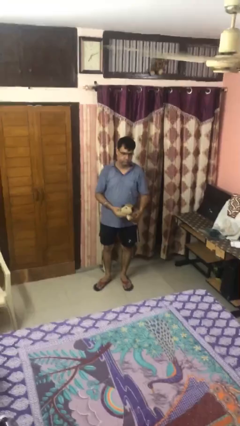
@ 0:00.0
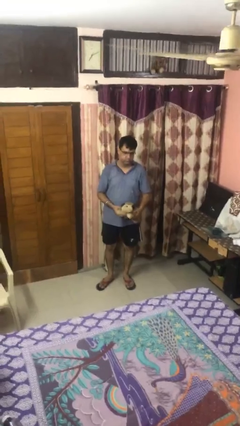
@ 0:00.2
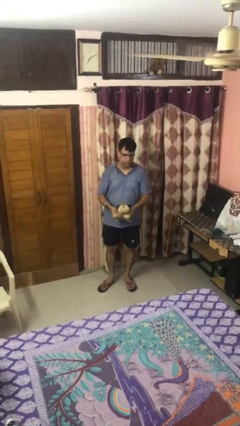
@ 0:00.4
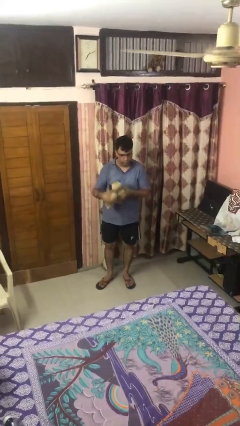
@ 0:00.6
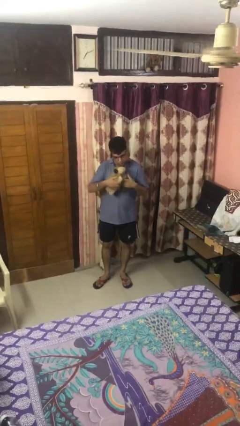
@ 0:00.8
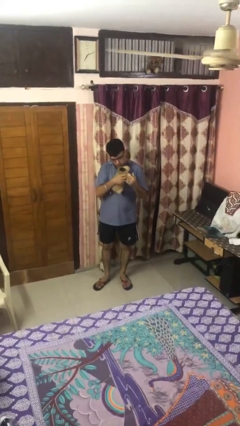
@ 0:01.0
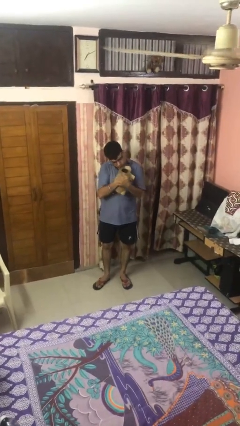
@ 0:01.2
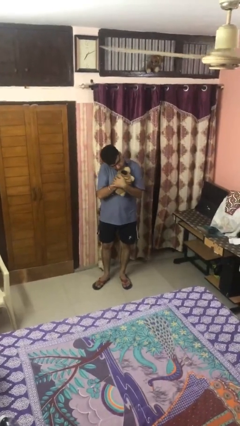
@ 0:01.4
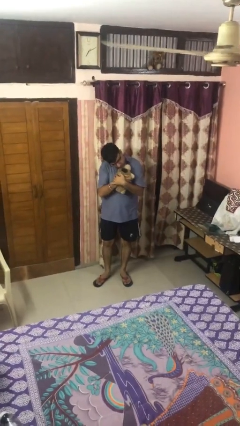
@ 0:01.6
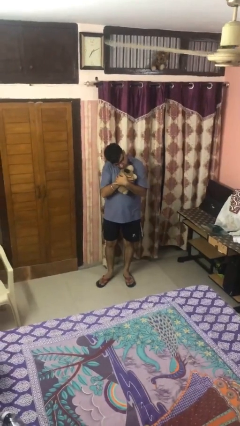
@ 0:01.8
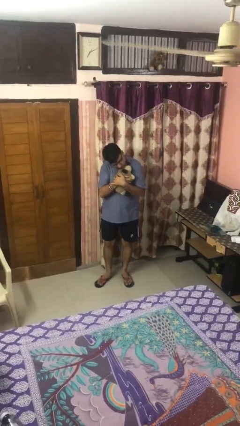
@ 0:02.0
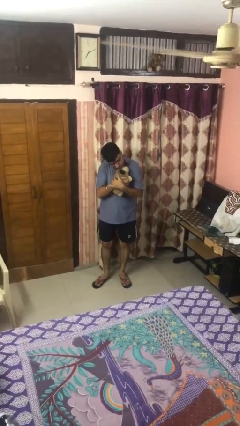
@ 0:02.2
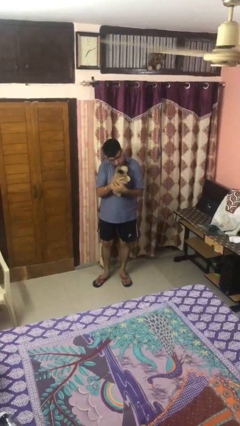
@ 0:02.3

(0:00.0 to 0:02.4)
person hugs stuffed animal

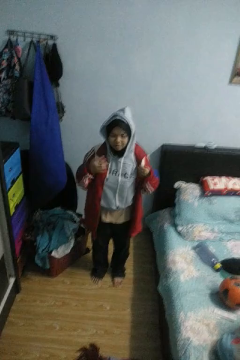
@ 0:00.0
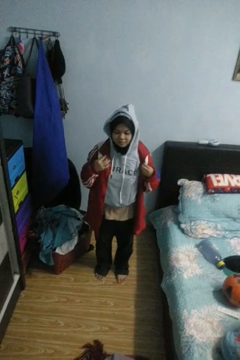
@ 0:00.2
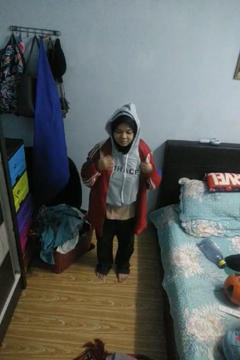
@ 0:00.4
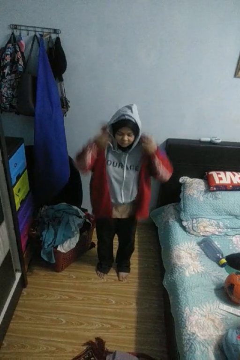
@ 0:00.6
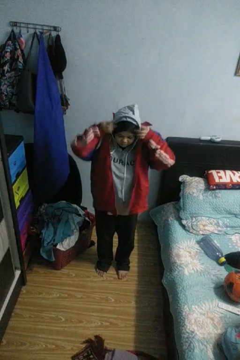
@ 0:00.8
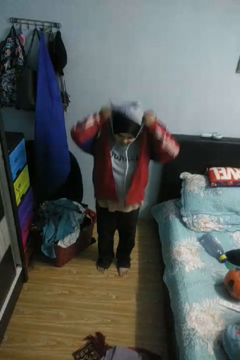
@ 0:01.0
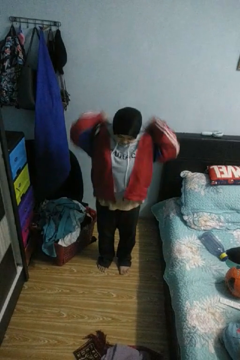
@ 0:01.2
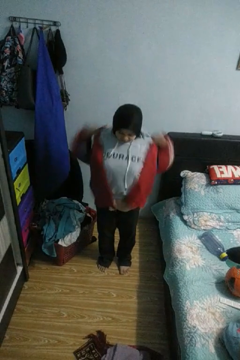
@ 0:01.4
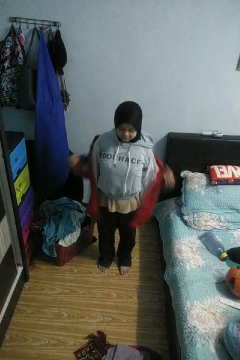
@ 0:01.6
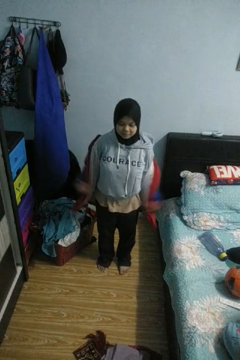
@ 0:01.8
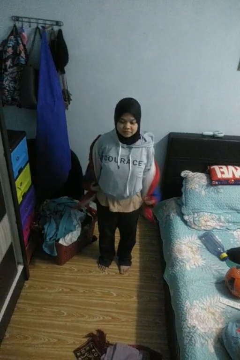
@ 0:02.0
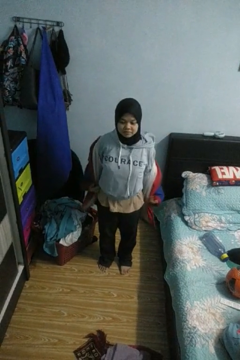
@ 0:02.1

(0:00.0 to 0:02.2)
person takes off hoodie

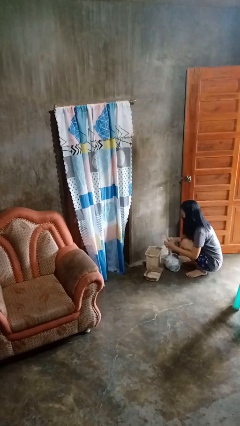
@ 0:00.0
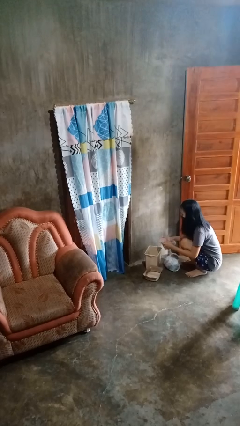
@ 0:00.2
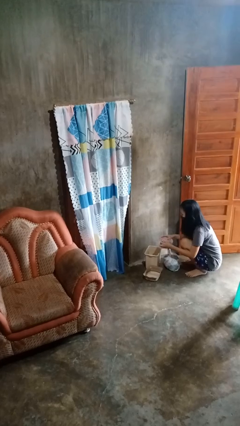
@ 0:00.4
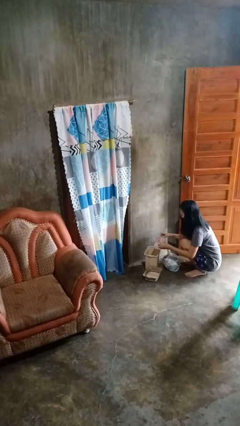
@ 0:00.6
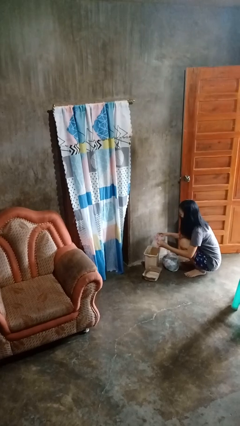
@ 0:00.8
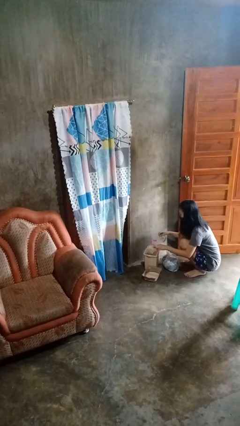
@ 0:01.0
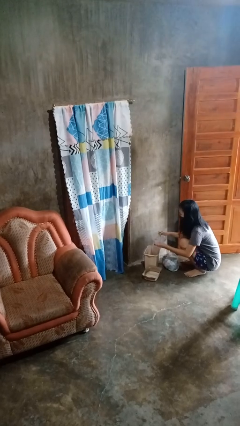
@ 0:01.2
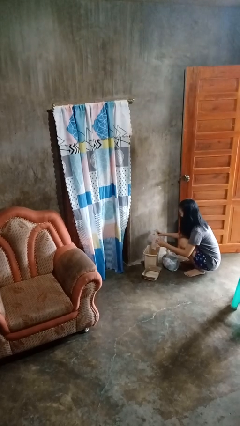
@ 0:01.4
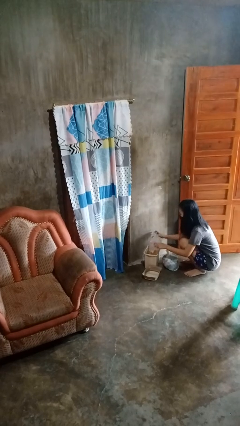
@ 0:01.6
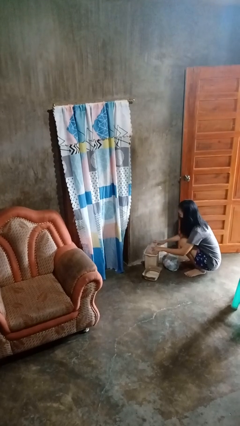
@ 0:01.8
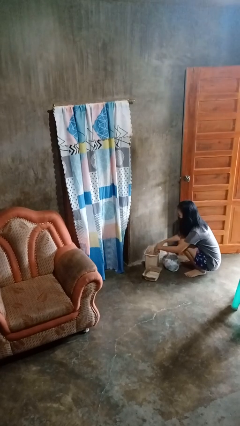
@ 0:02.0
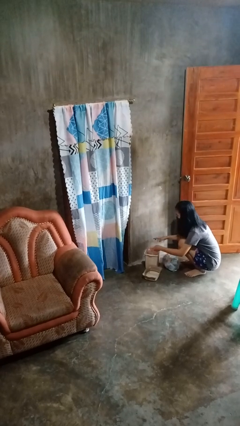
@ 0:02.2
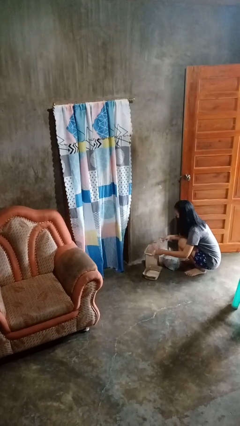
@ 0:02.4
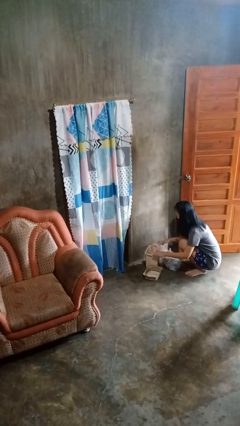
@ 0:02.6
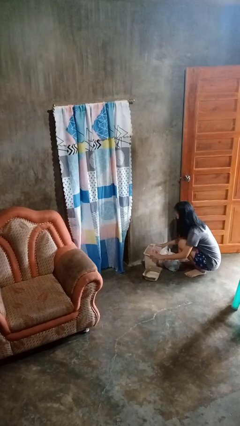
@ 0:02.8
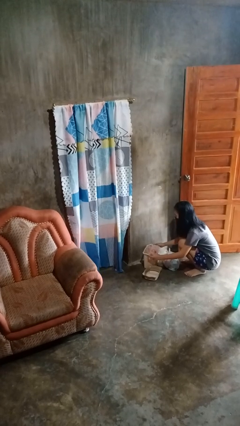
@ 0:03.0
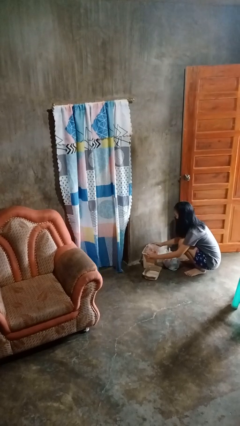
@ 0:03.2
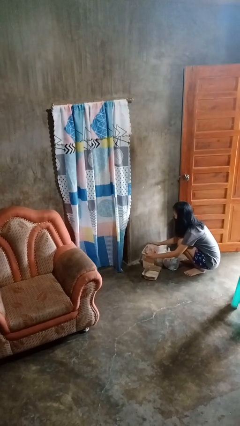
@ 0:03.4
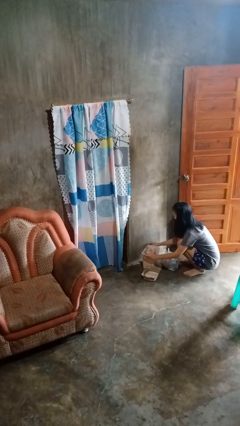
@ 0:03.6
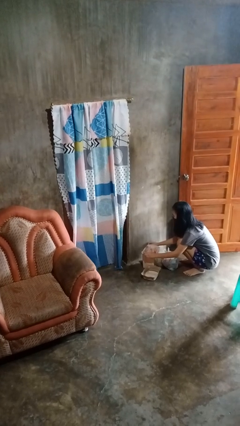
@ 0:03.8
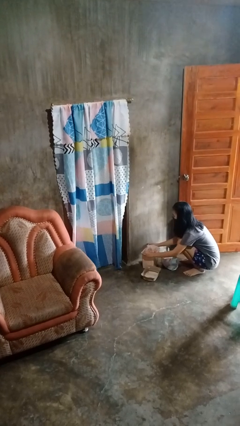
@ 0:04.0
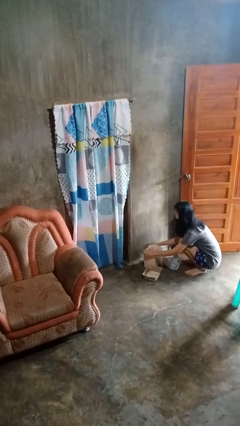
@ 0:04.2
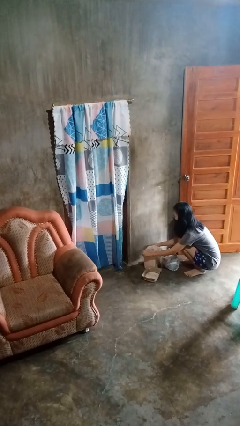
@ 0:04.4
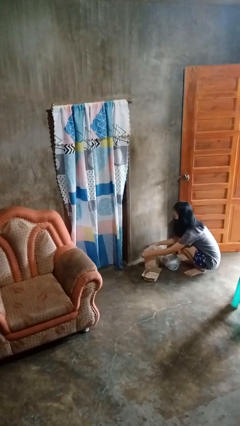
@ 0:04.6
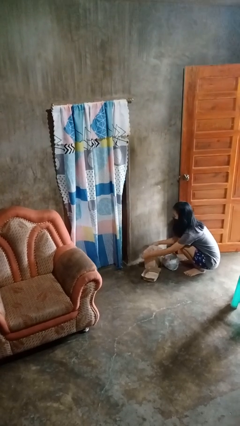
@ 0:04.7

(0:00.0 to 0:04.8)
person inserts trashbag into trashcan

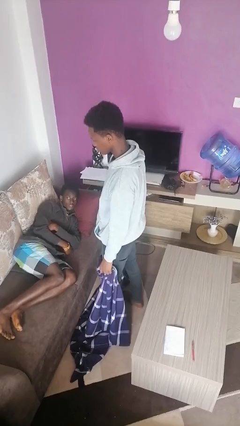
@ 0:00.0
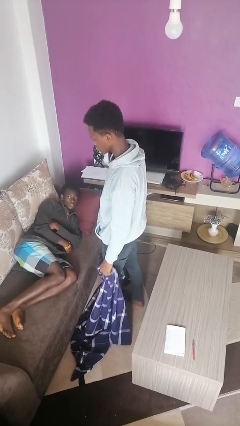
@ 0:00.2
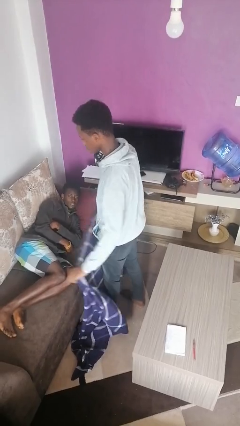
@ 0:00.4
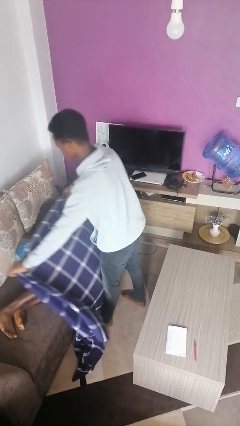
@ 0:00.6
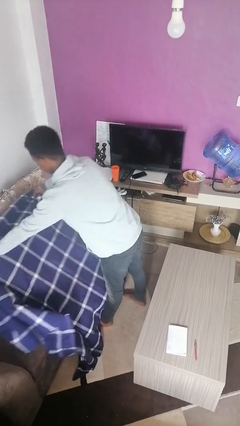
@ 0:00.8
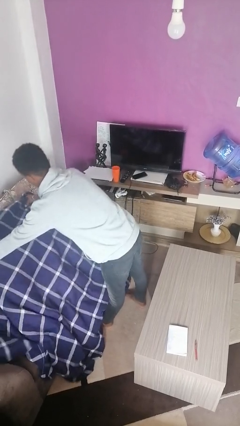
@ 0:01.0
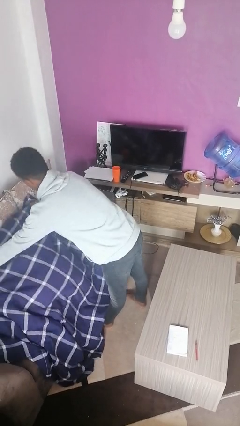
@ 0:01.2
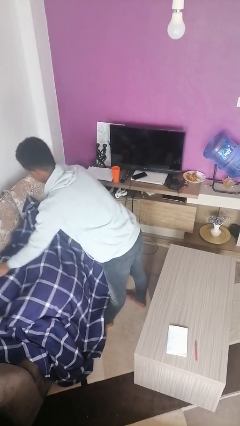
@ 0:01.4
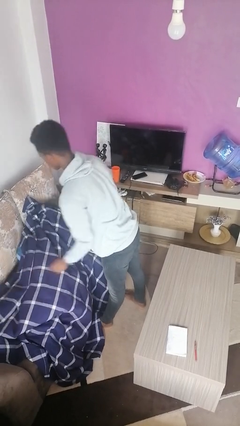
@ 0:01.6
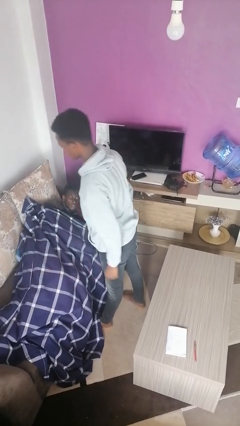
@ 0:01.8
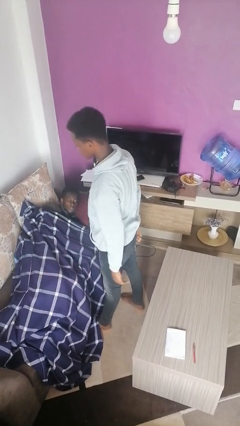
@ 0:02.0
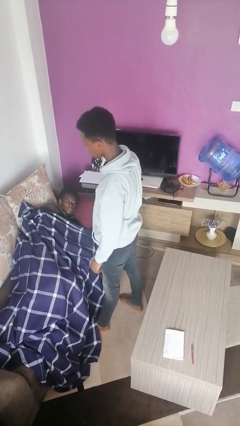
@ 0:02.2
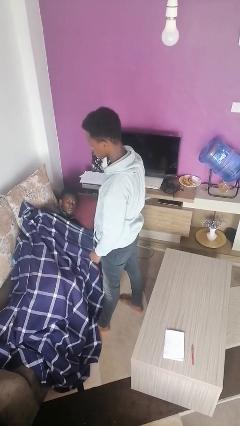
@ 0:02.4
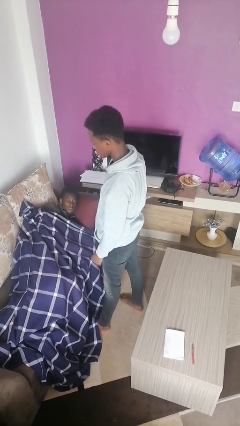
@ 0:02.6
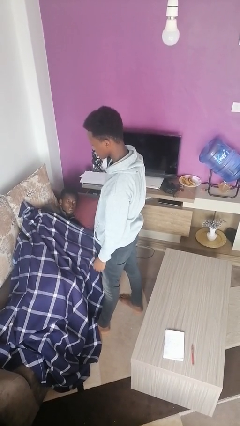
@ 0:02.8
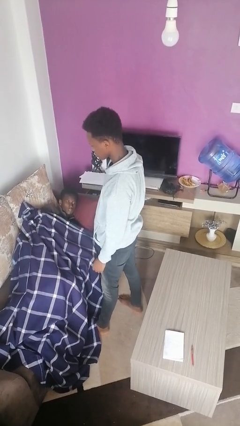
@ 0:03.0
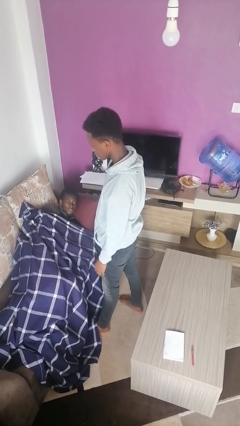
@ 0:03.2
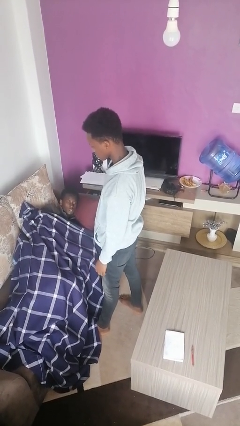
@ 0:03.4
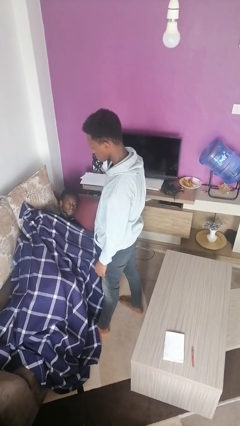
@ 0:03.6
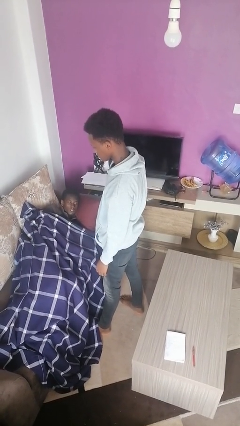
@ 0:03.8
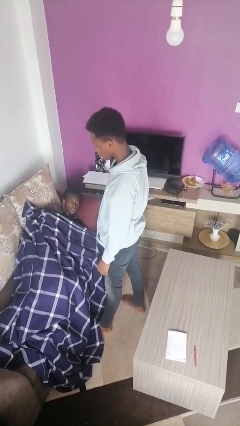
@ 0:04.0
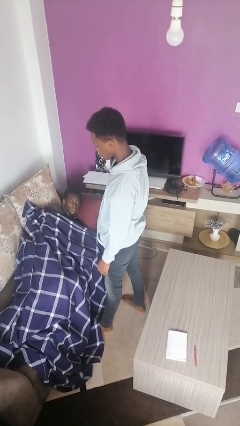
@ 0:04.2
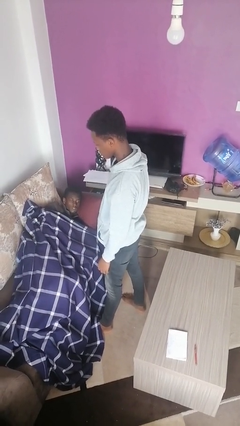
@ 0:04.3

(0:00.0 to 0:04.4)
person covers friend with blanket

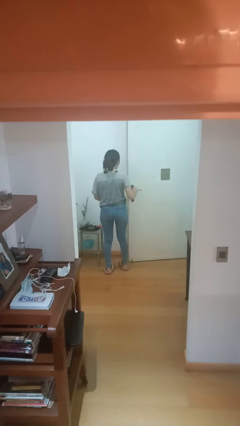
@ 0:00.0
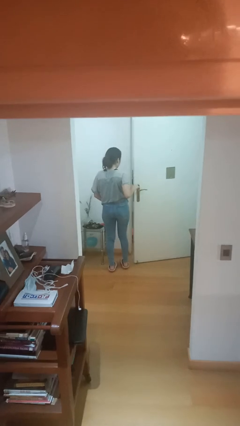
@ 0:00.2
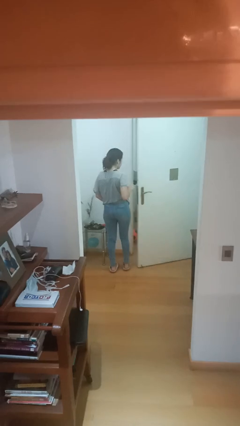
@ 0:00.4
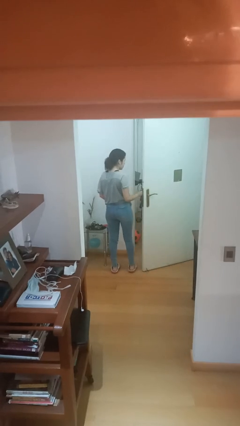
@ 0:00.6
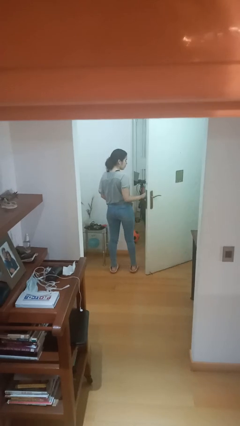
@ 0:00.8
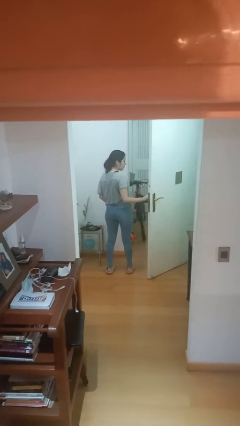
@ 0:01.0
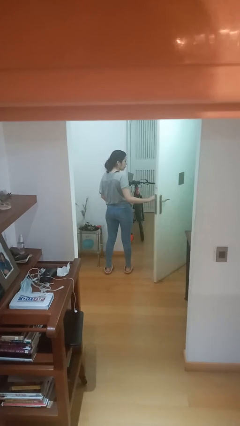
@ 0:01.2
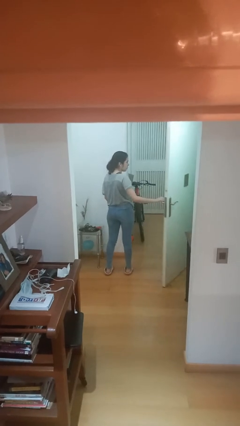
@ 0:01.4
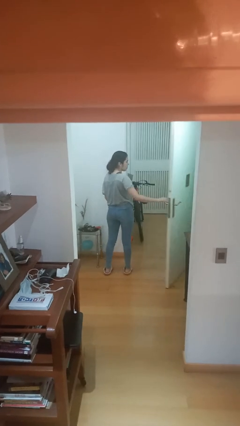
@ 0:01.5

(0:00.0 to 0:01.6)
person opens facility door

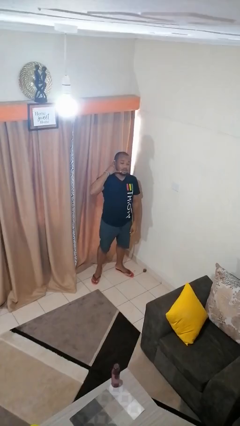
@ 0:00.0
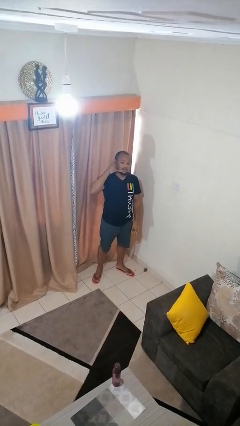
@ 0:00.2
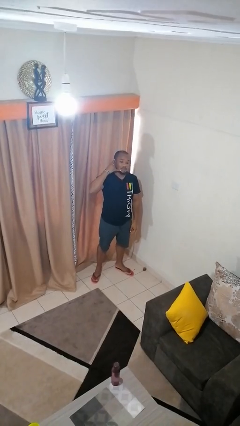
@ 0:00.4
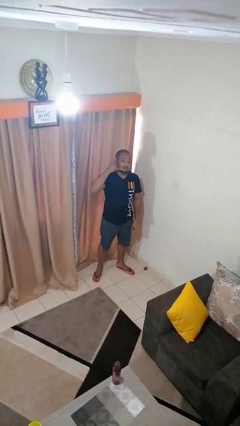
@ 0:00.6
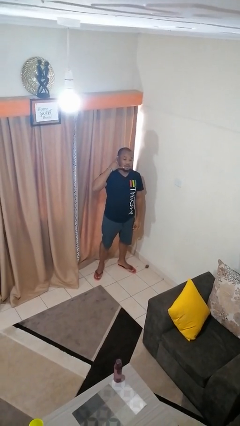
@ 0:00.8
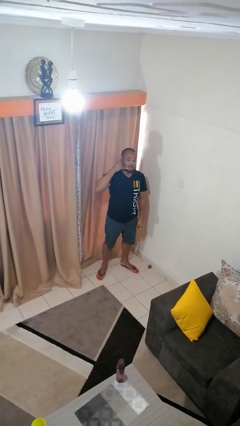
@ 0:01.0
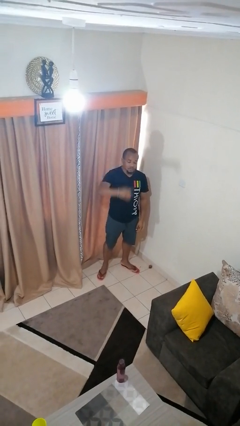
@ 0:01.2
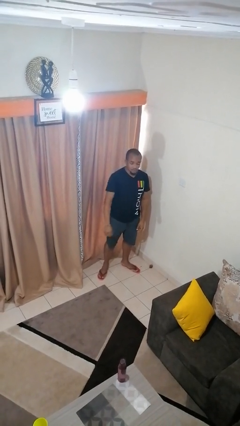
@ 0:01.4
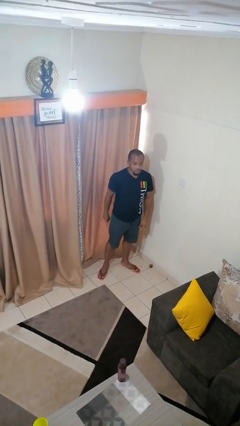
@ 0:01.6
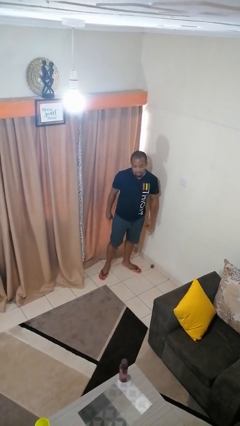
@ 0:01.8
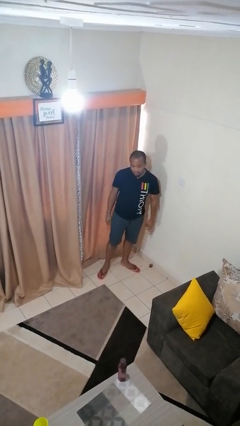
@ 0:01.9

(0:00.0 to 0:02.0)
person gestures call me

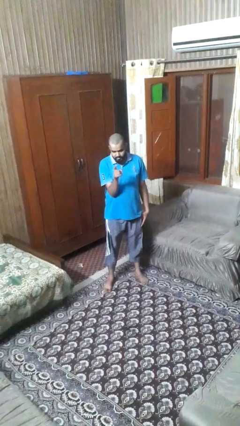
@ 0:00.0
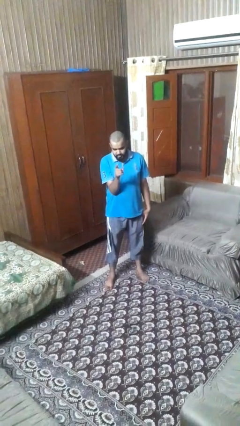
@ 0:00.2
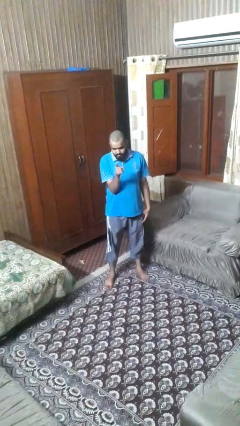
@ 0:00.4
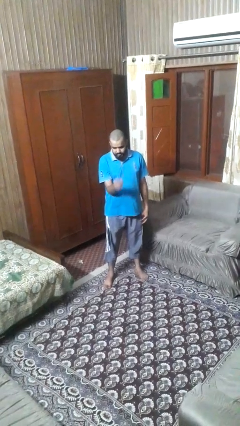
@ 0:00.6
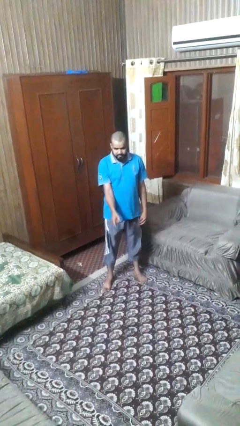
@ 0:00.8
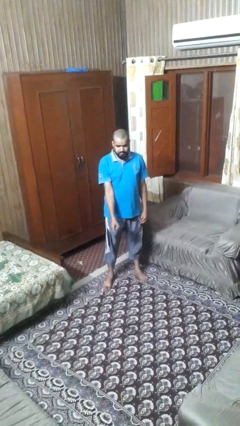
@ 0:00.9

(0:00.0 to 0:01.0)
person points at person
